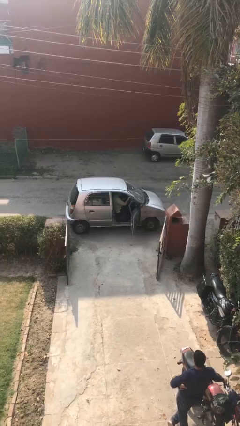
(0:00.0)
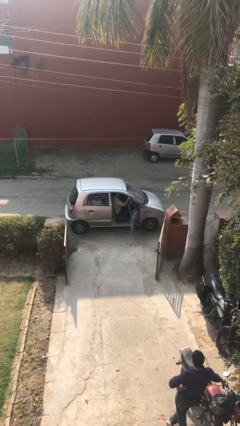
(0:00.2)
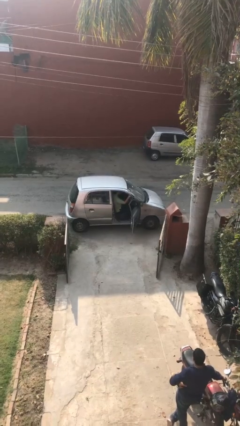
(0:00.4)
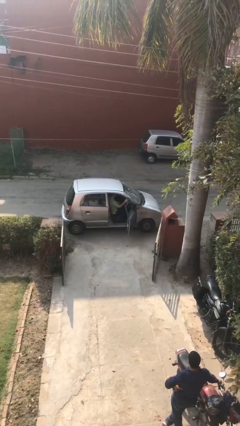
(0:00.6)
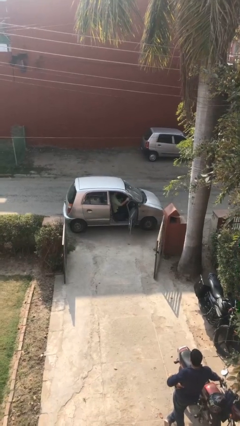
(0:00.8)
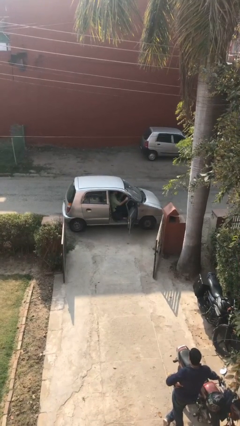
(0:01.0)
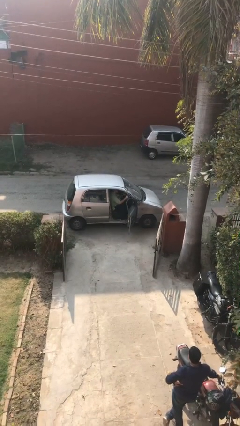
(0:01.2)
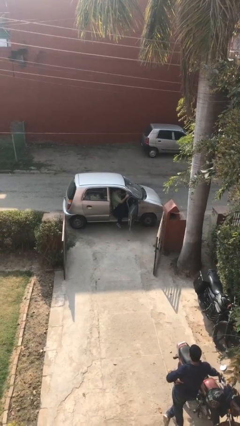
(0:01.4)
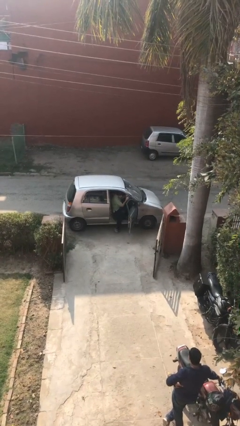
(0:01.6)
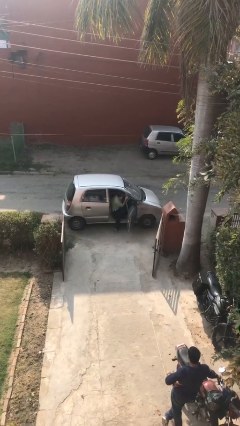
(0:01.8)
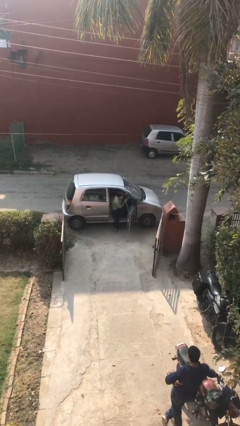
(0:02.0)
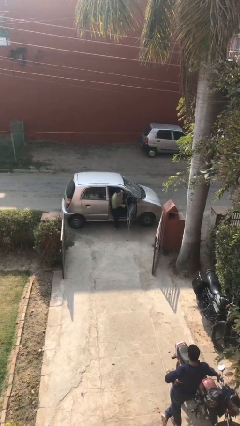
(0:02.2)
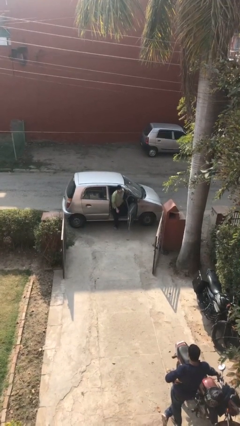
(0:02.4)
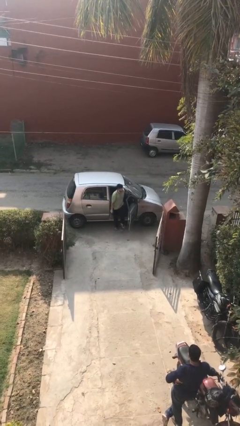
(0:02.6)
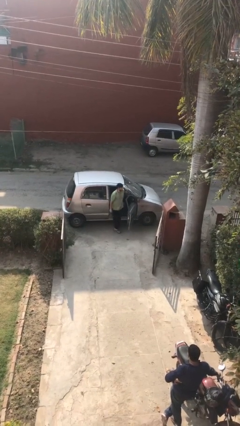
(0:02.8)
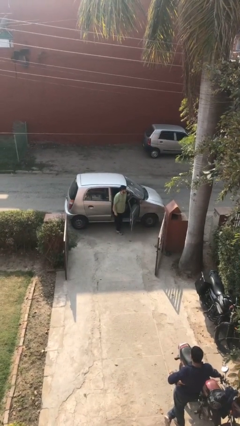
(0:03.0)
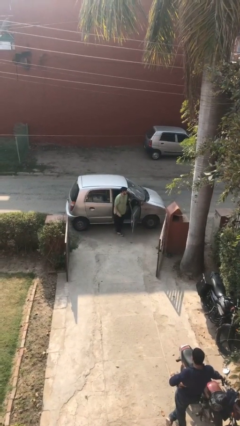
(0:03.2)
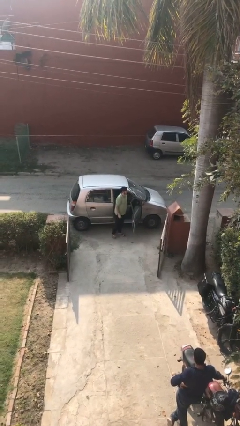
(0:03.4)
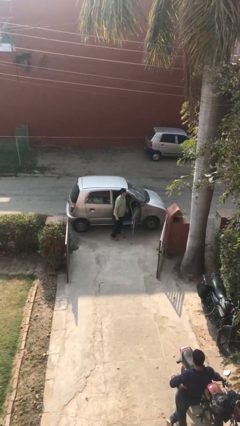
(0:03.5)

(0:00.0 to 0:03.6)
person exits car

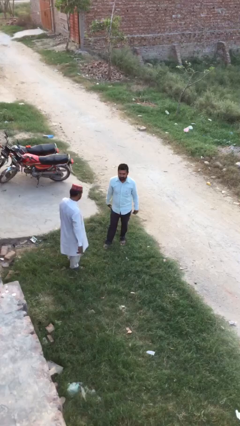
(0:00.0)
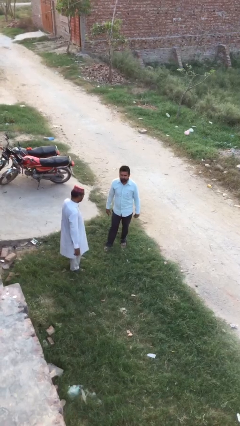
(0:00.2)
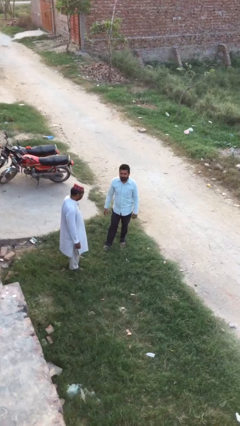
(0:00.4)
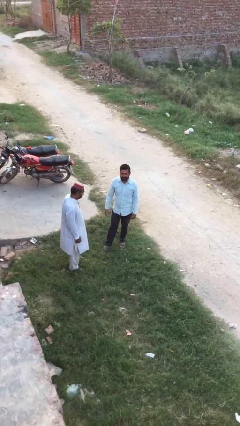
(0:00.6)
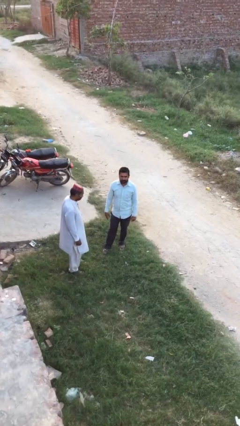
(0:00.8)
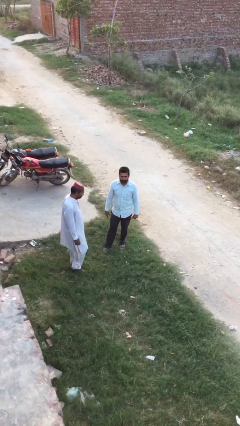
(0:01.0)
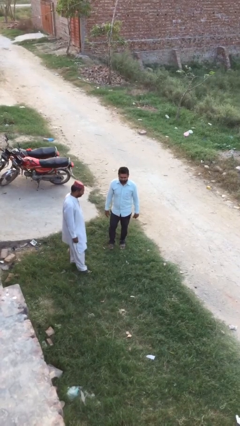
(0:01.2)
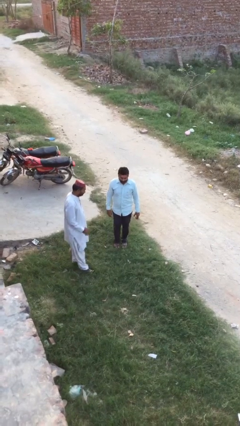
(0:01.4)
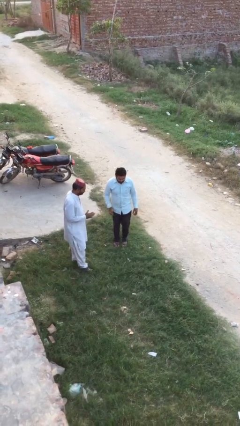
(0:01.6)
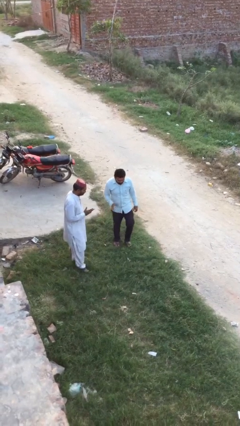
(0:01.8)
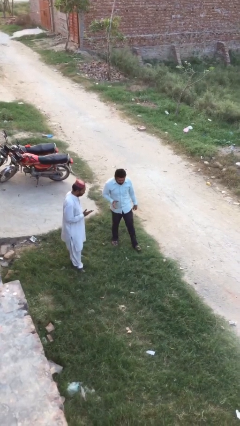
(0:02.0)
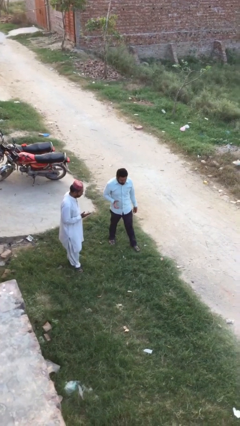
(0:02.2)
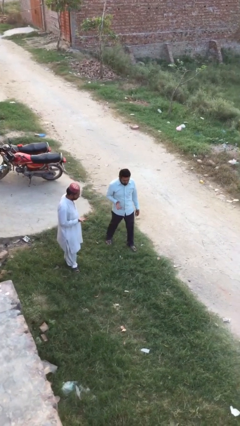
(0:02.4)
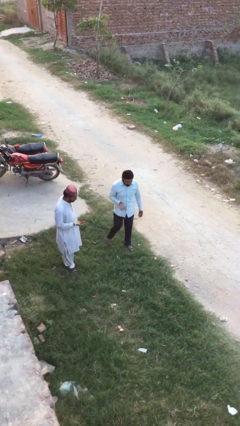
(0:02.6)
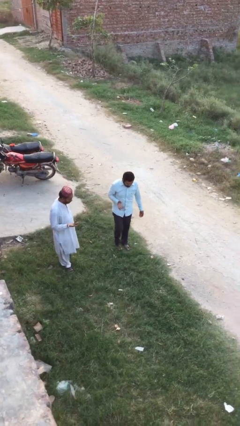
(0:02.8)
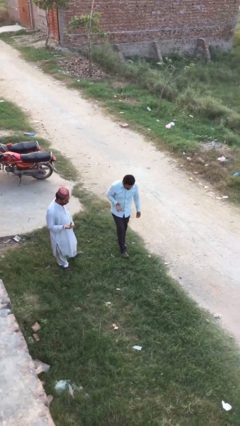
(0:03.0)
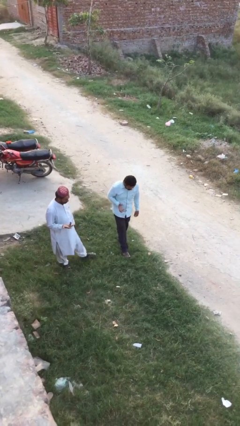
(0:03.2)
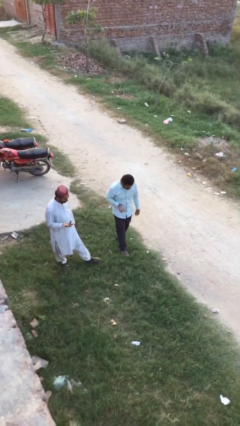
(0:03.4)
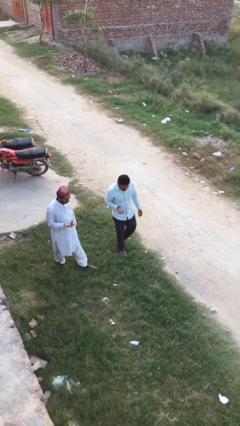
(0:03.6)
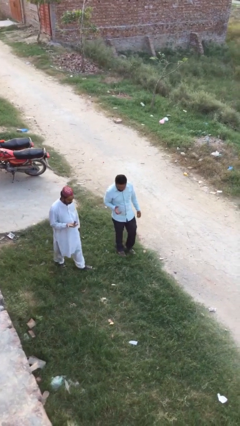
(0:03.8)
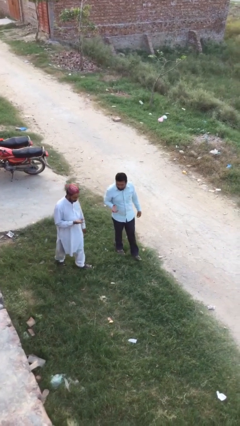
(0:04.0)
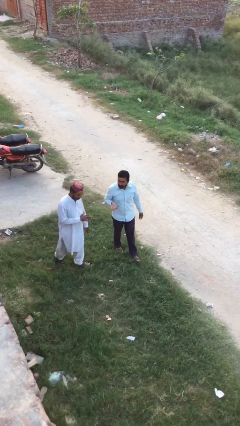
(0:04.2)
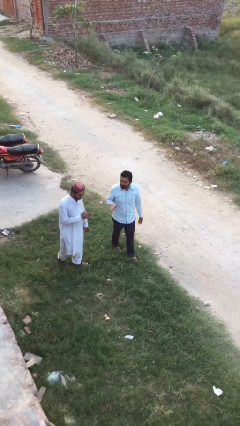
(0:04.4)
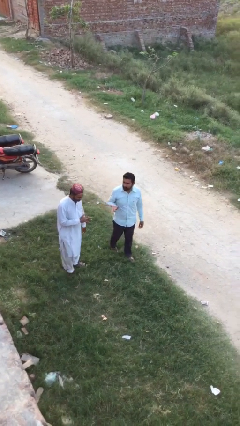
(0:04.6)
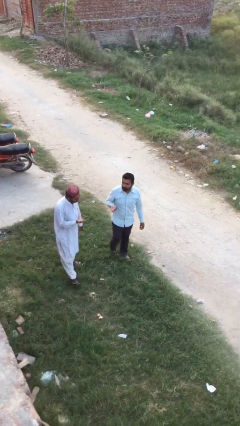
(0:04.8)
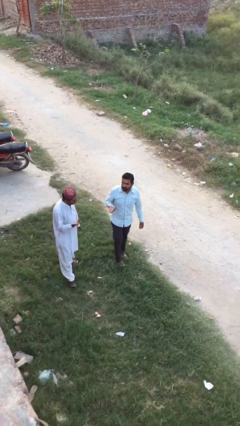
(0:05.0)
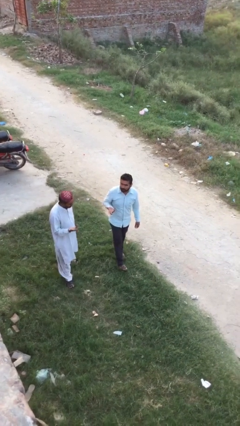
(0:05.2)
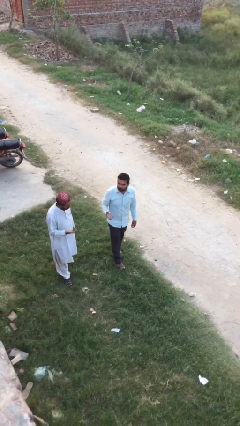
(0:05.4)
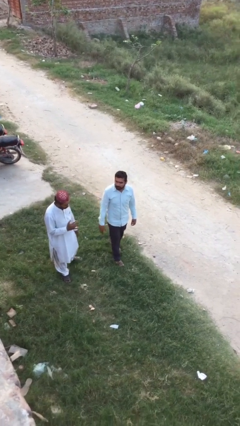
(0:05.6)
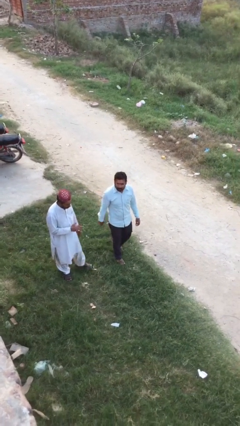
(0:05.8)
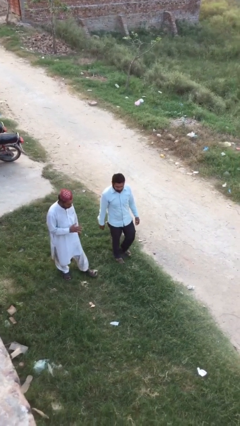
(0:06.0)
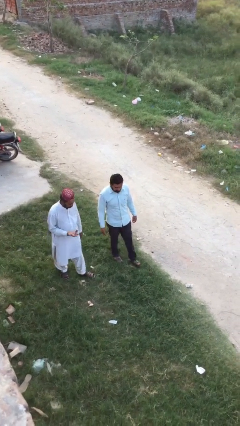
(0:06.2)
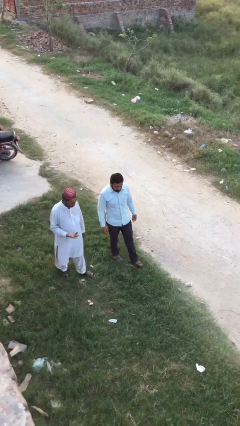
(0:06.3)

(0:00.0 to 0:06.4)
person talks to person

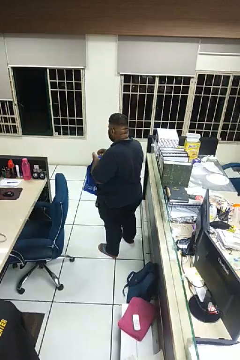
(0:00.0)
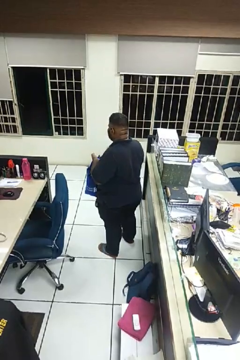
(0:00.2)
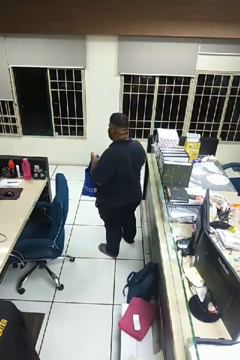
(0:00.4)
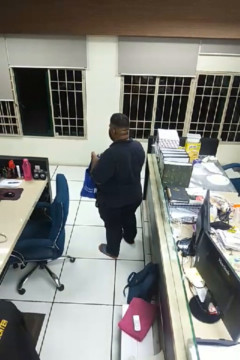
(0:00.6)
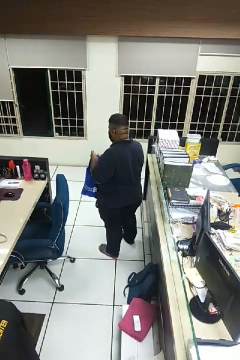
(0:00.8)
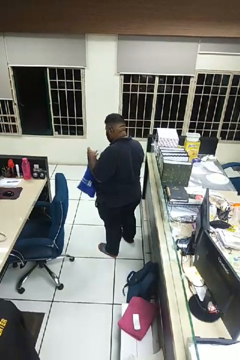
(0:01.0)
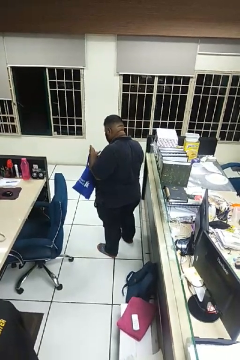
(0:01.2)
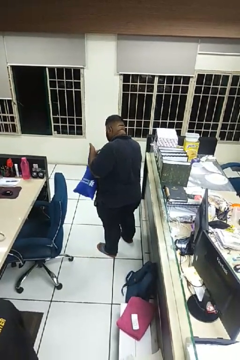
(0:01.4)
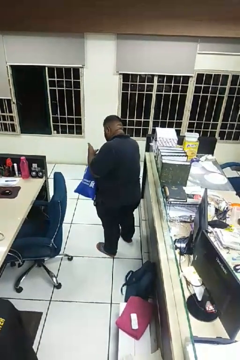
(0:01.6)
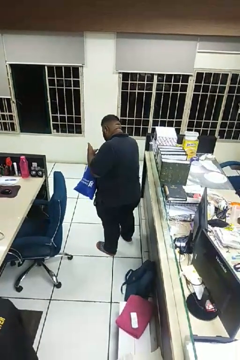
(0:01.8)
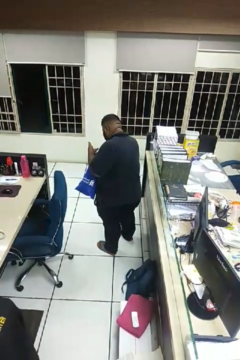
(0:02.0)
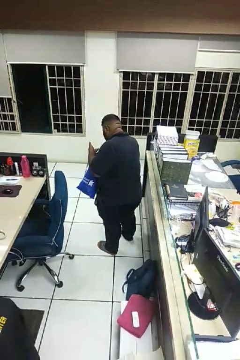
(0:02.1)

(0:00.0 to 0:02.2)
person searches in bag

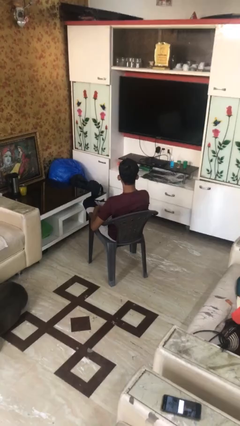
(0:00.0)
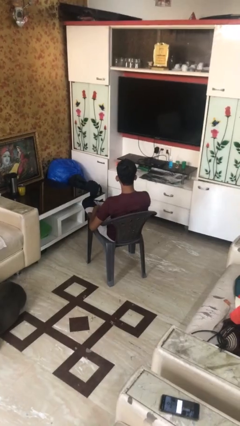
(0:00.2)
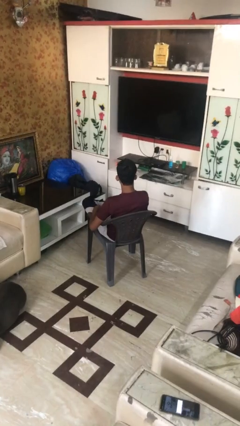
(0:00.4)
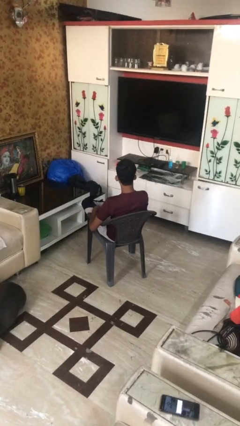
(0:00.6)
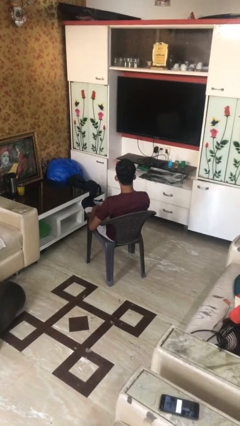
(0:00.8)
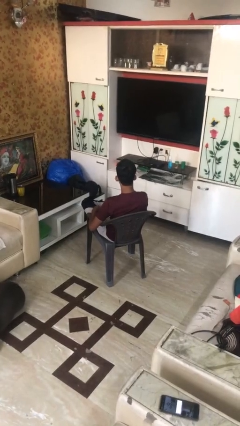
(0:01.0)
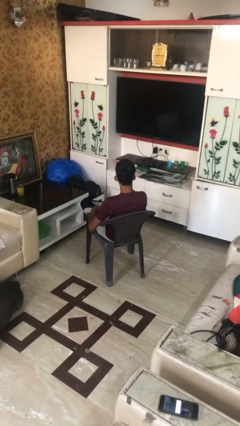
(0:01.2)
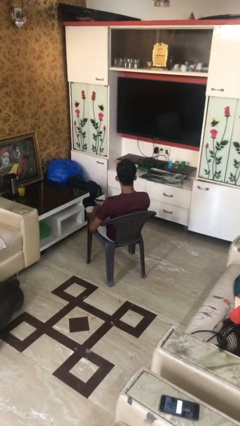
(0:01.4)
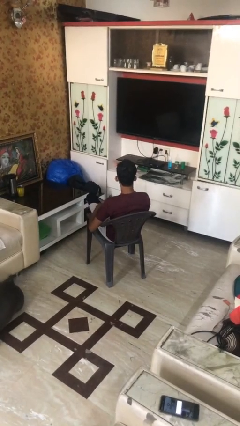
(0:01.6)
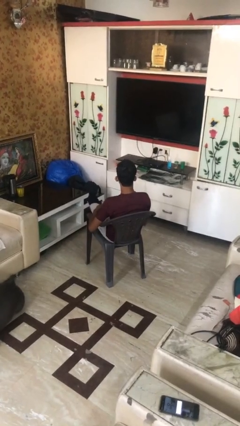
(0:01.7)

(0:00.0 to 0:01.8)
person rubs foot

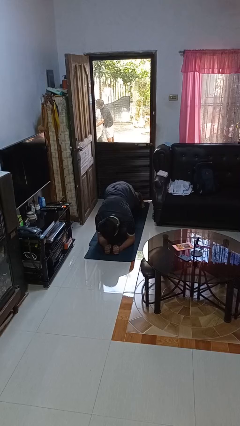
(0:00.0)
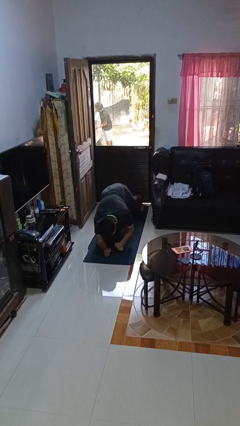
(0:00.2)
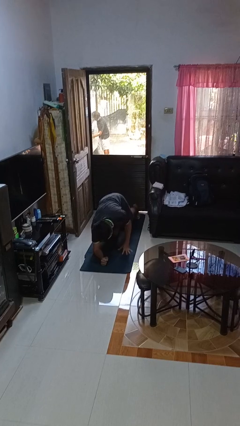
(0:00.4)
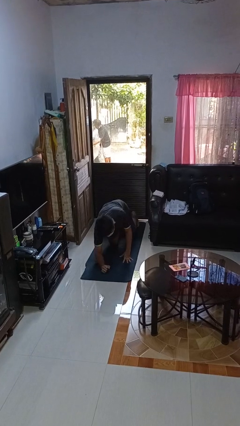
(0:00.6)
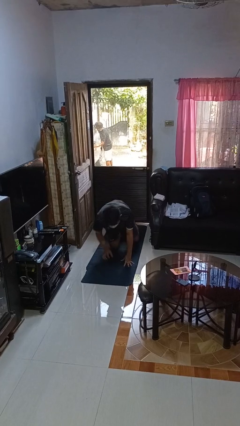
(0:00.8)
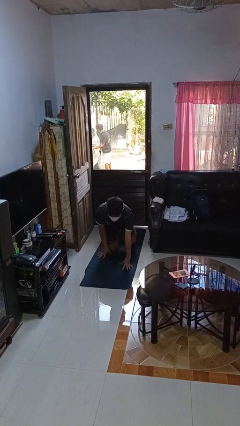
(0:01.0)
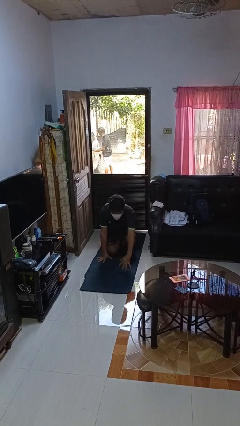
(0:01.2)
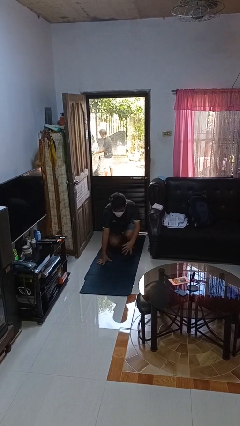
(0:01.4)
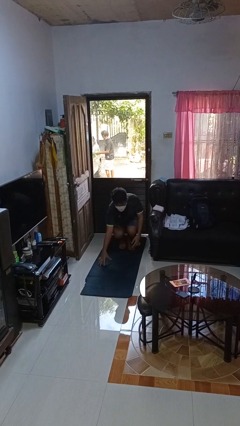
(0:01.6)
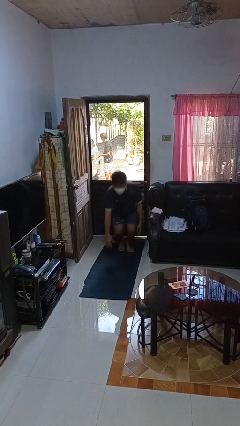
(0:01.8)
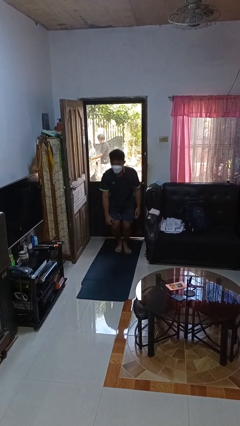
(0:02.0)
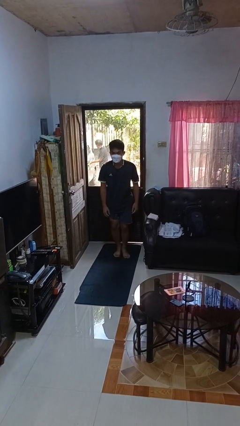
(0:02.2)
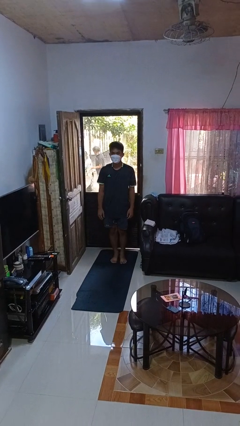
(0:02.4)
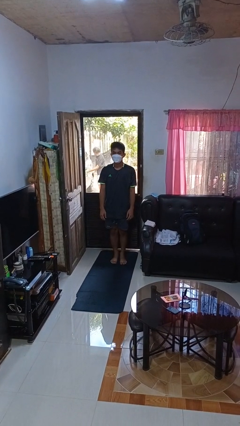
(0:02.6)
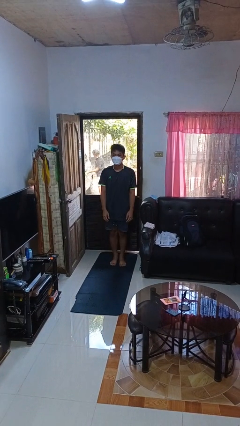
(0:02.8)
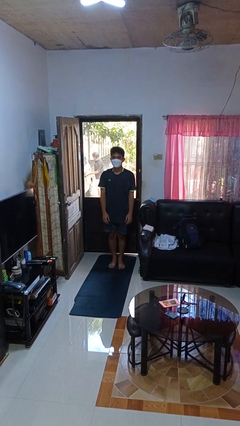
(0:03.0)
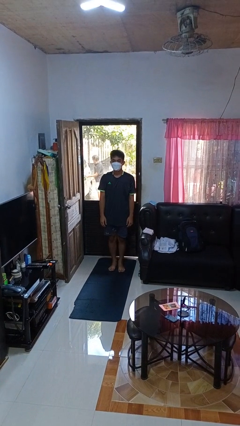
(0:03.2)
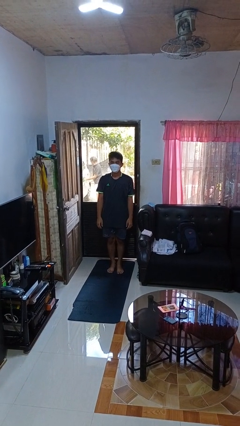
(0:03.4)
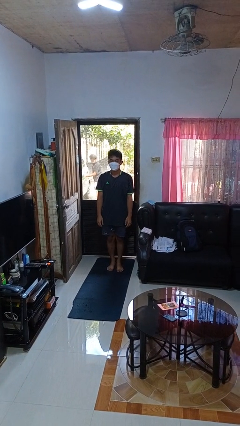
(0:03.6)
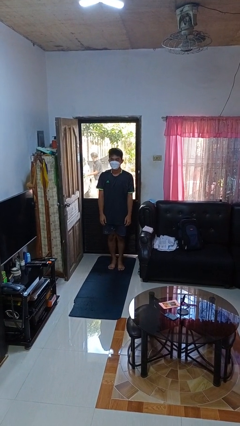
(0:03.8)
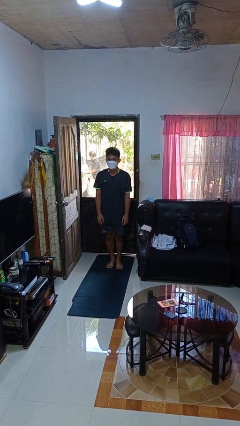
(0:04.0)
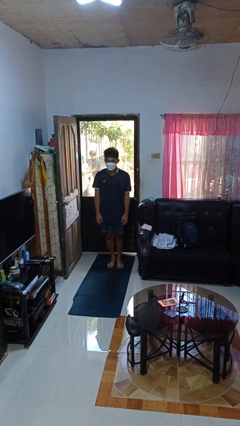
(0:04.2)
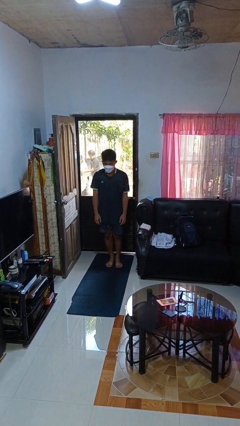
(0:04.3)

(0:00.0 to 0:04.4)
person stands up from floor
